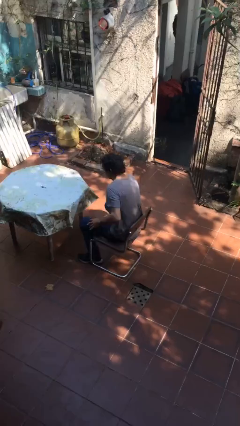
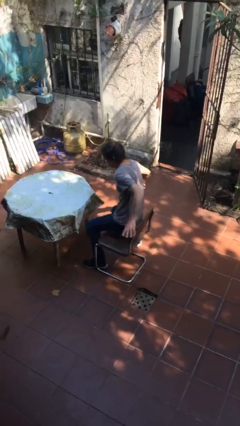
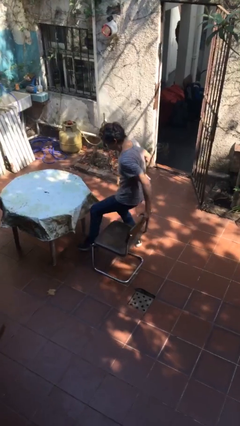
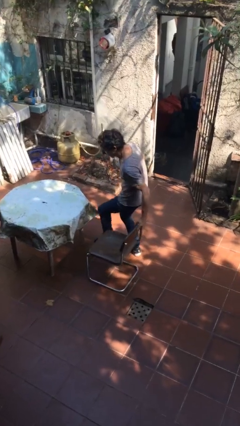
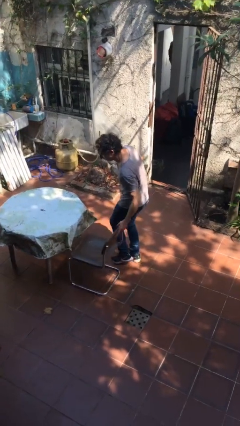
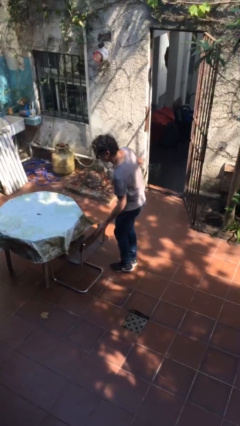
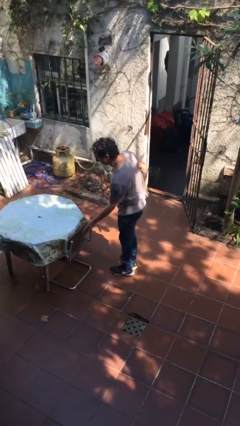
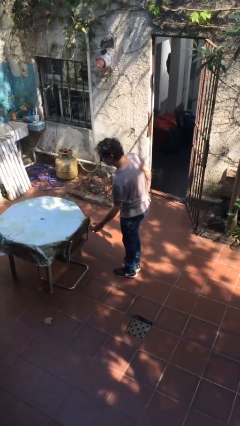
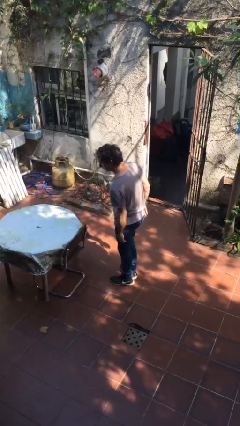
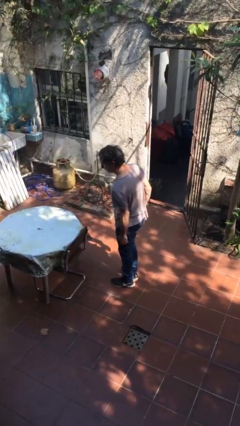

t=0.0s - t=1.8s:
person stands up

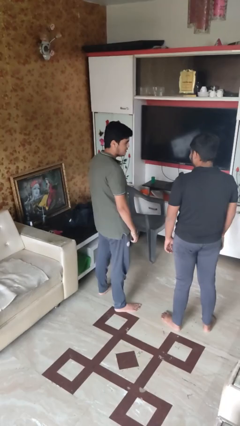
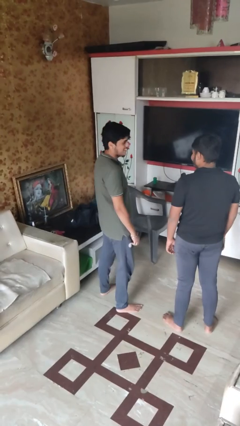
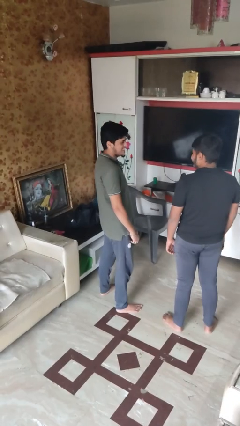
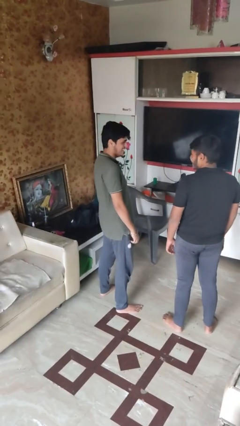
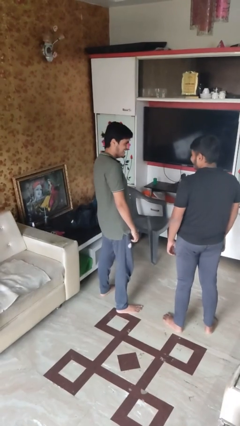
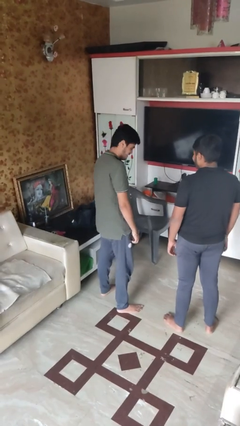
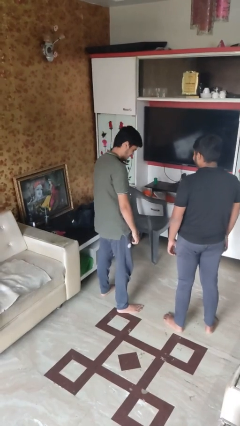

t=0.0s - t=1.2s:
person laughs with person

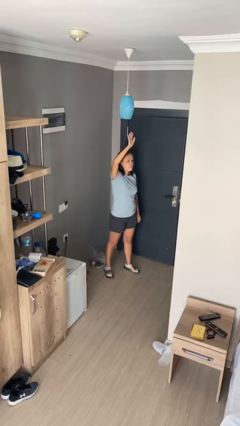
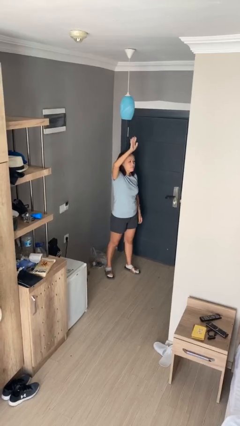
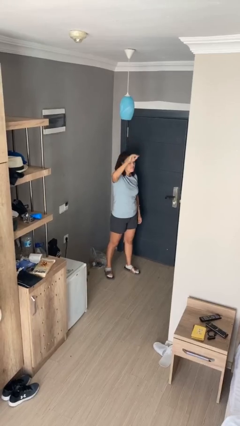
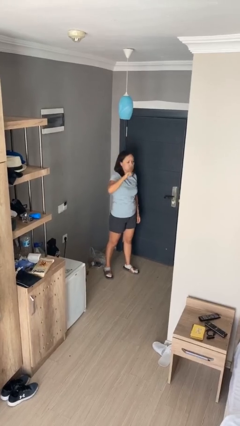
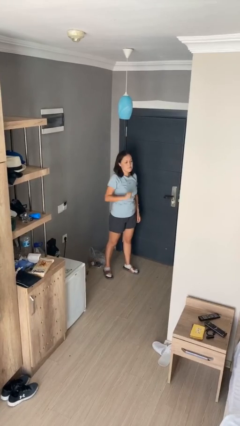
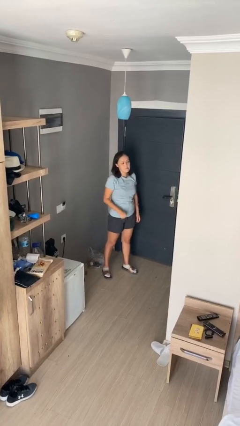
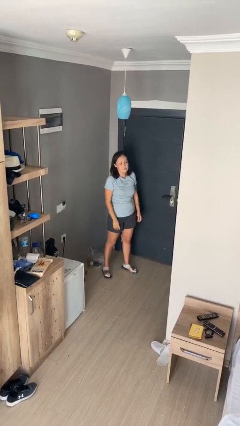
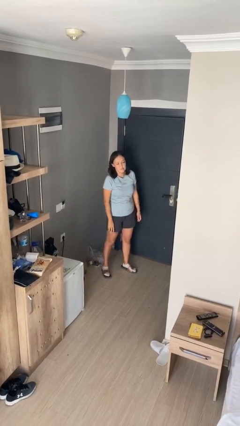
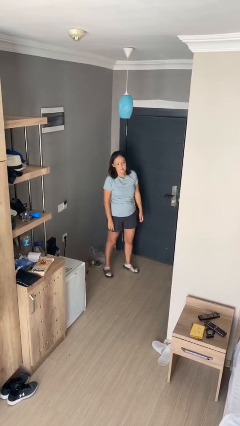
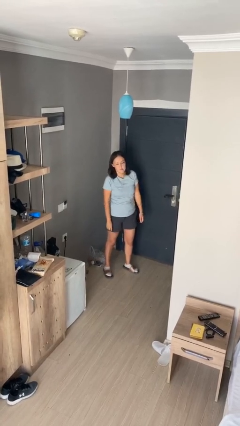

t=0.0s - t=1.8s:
person gestures lower hand

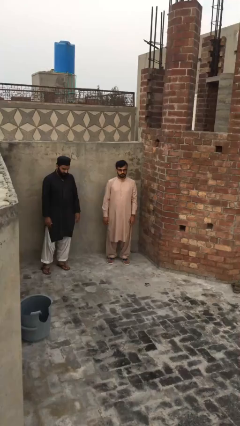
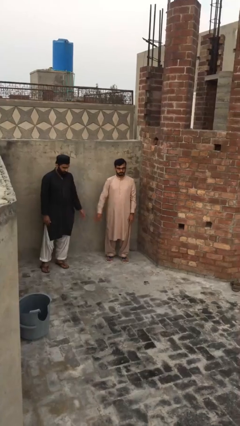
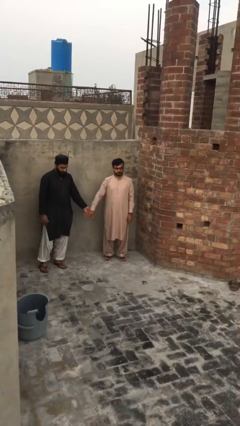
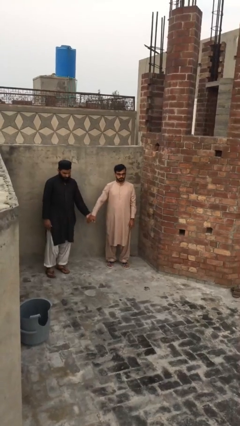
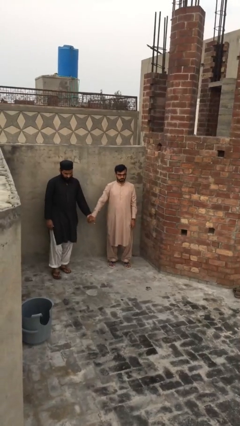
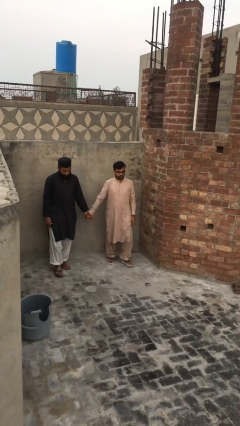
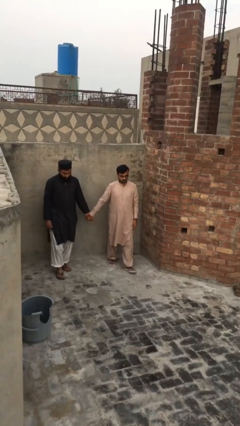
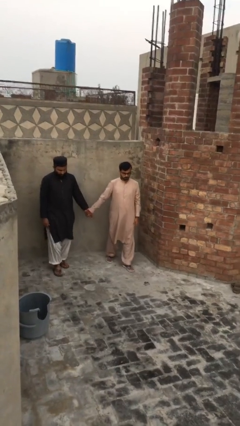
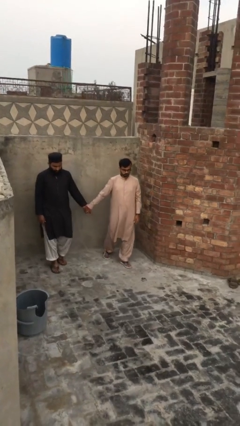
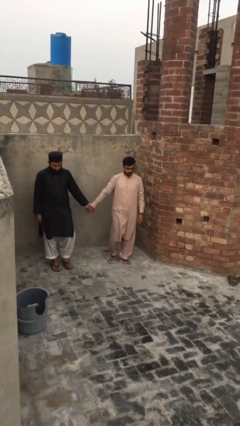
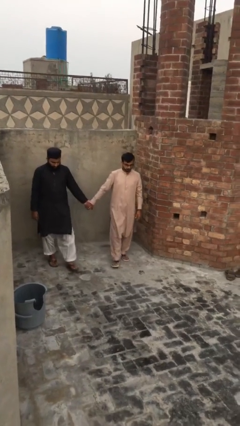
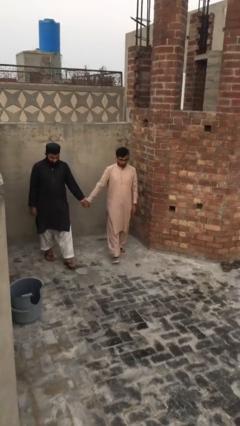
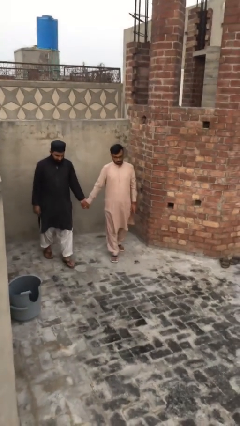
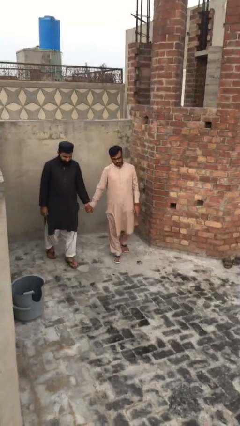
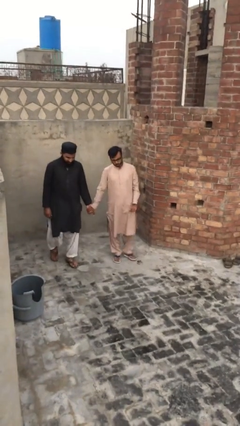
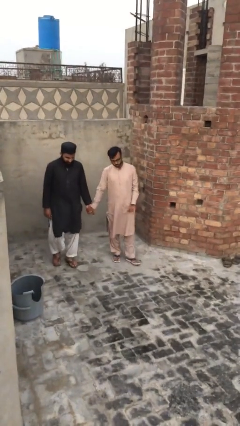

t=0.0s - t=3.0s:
person holds hand

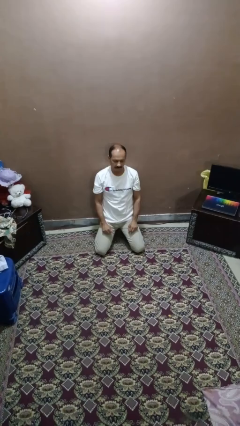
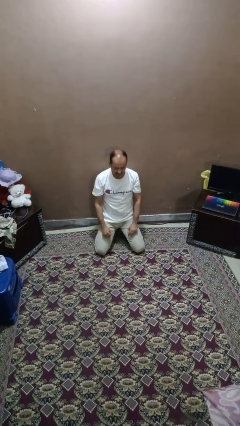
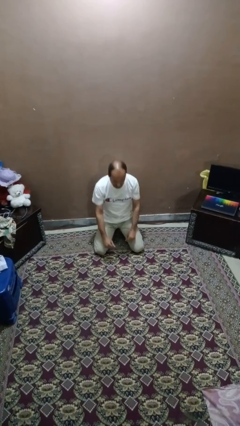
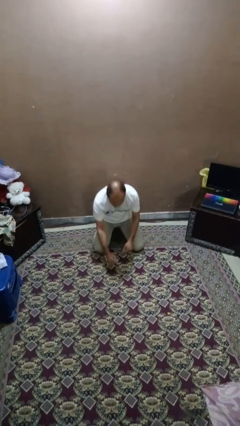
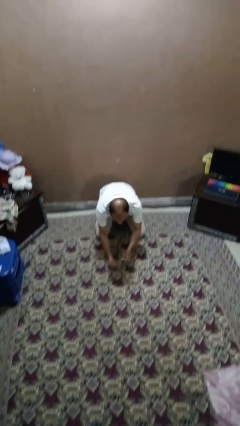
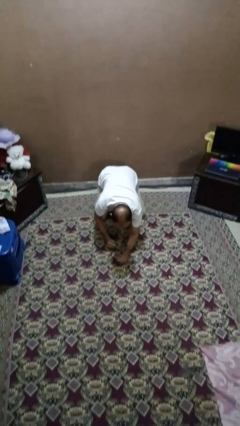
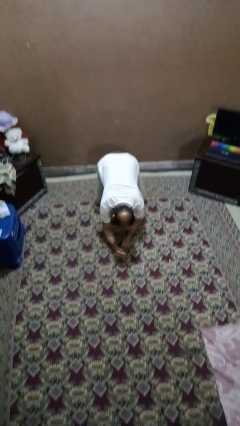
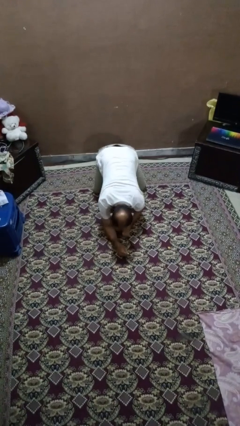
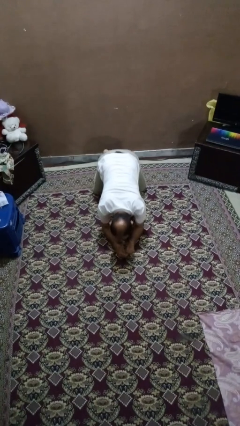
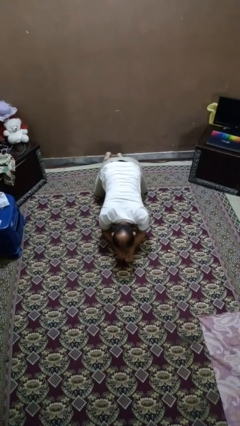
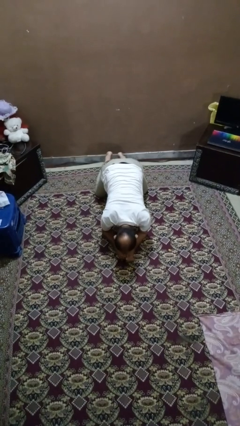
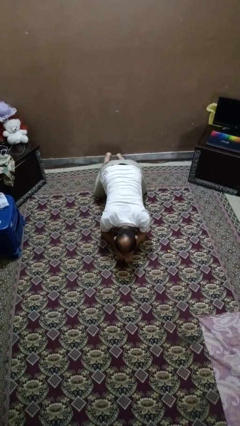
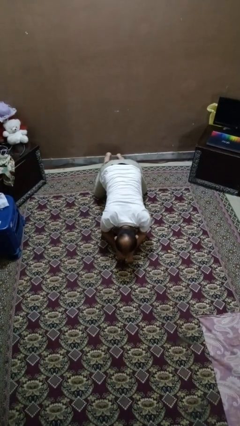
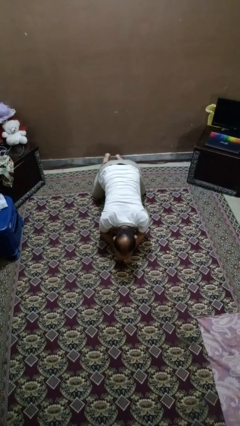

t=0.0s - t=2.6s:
person crawls

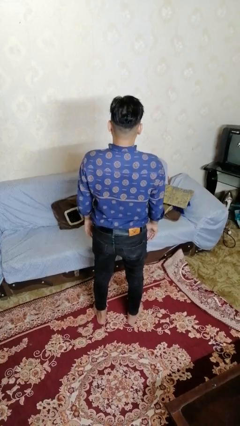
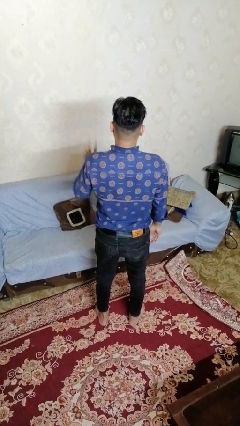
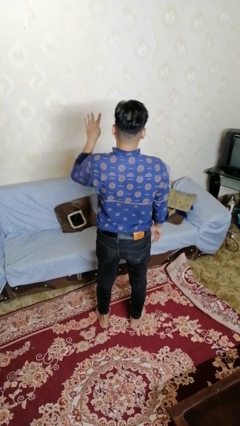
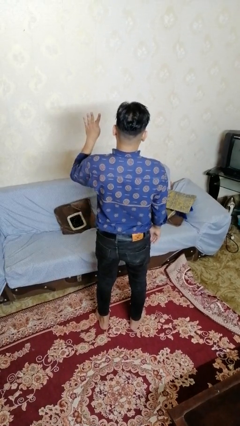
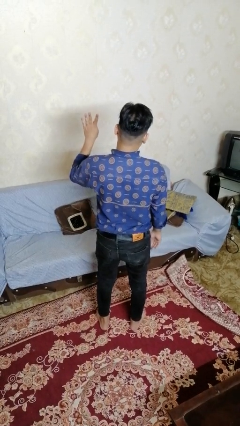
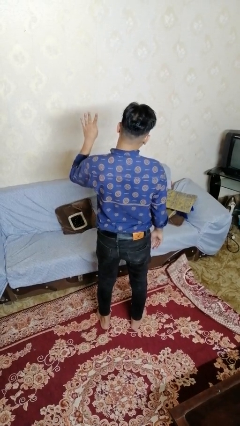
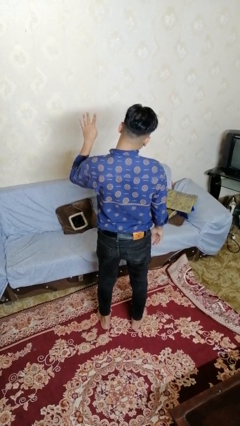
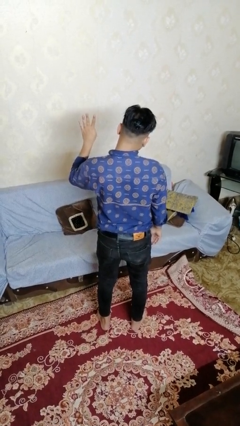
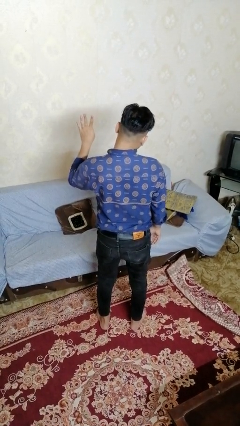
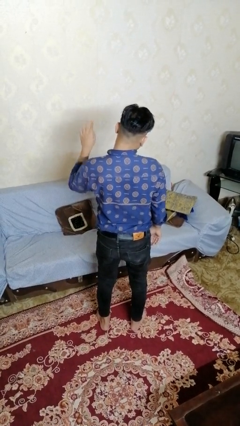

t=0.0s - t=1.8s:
person gestures number four

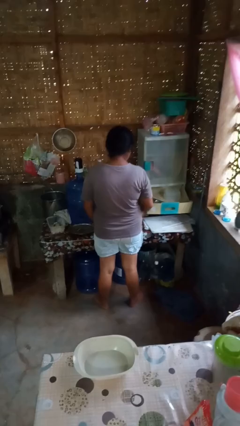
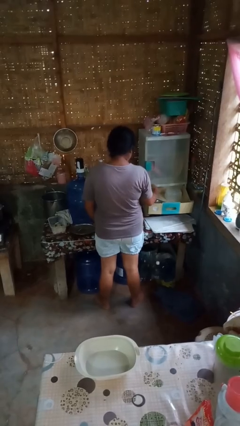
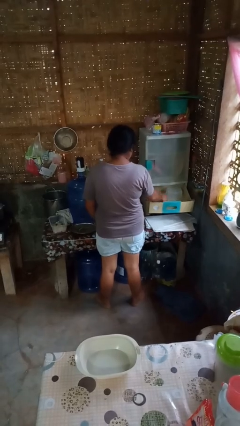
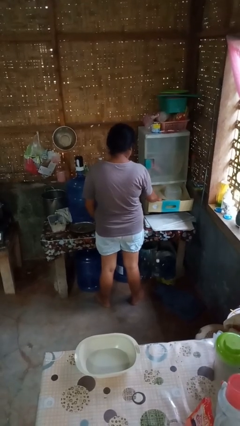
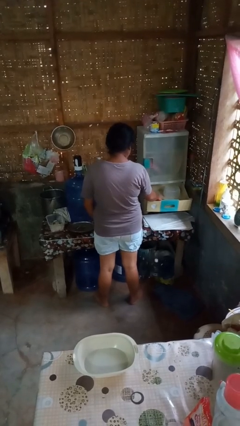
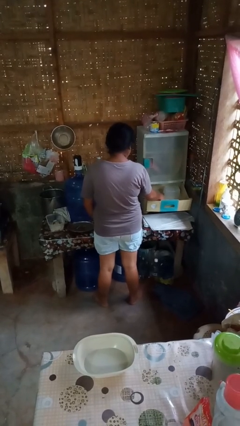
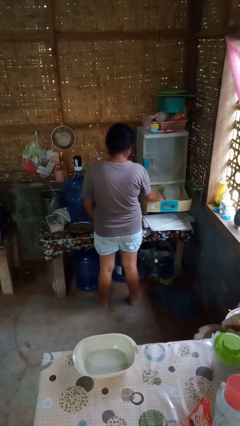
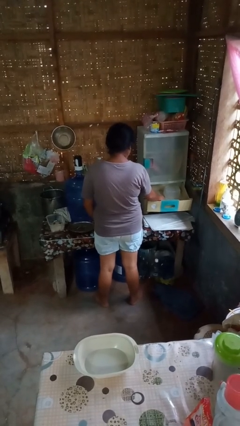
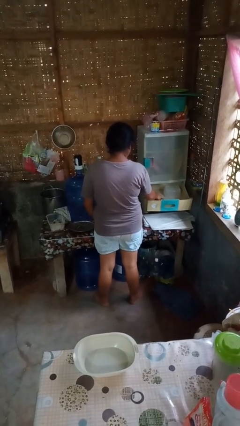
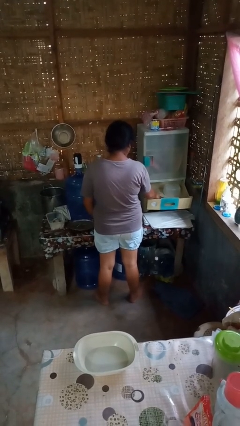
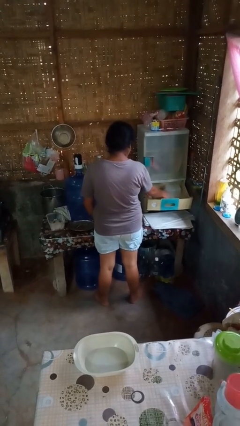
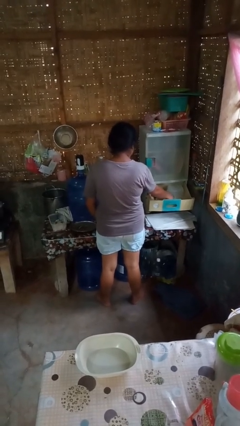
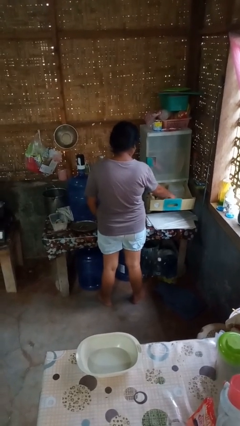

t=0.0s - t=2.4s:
person searches in kitchen drawer

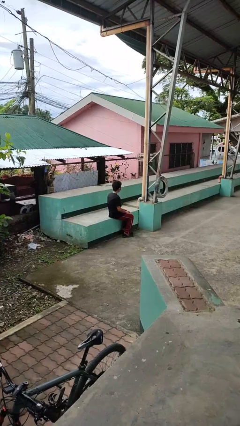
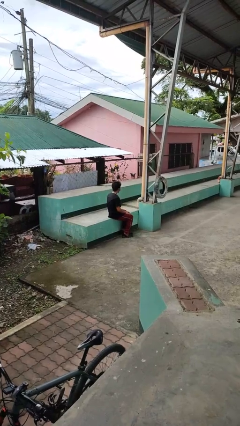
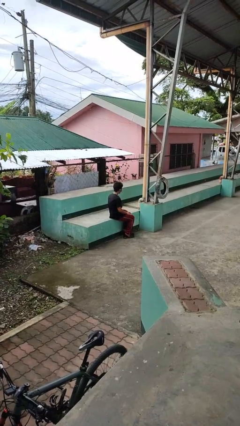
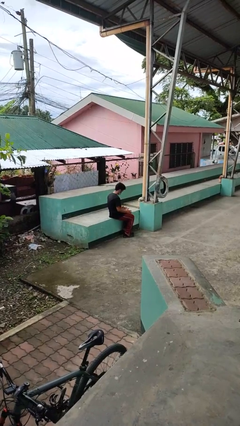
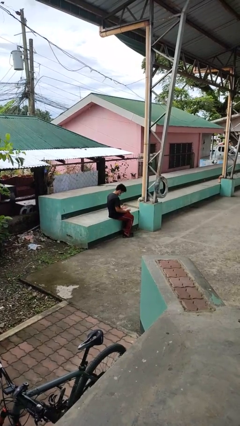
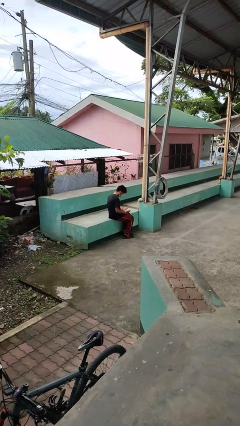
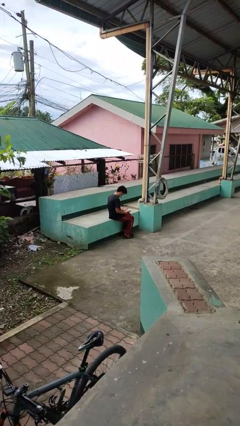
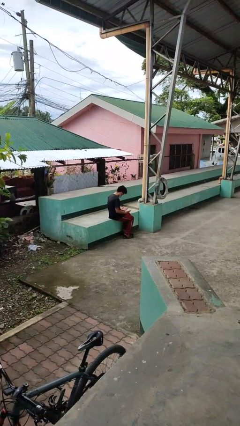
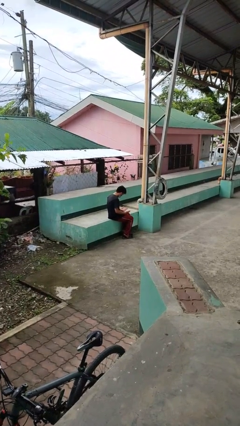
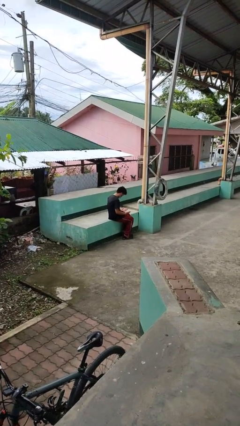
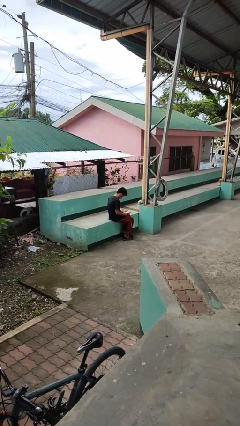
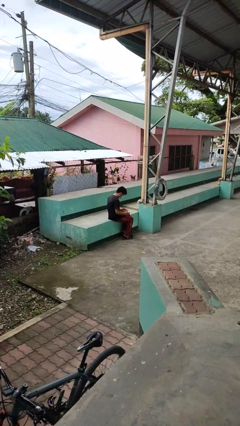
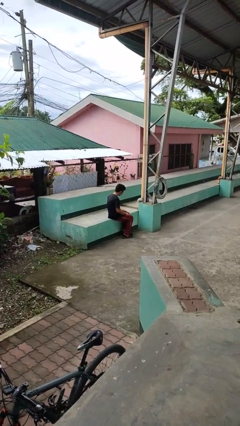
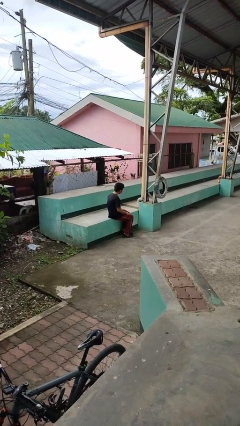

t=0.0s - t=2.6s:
person looks at hands in lap
